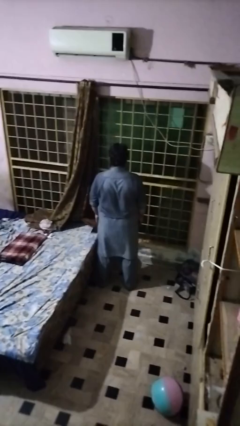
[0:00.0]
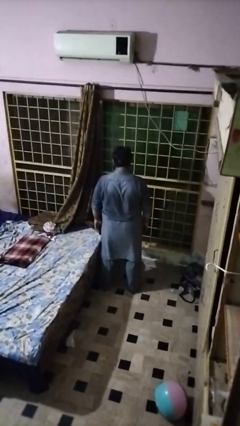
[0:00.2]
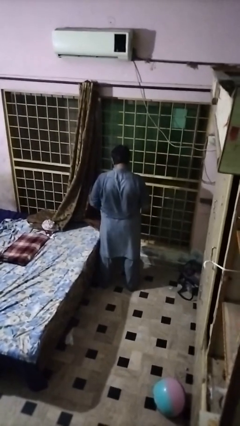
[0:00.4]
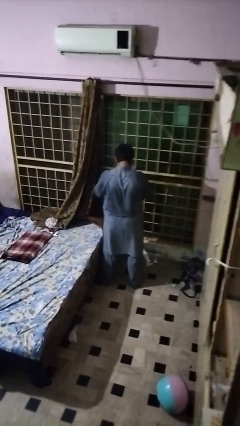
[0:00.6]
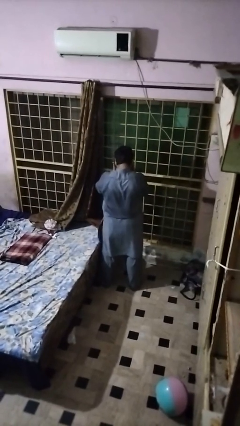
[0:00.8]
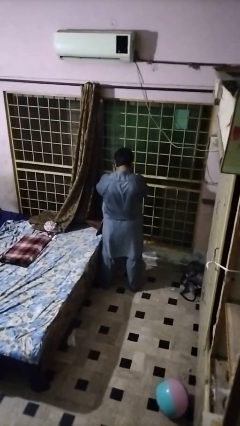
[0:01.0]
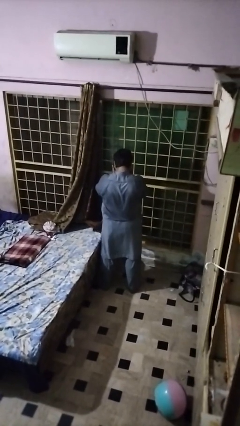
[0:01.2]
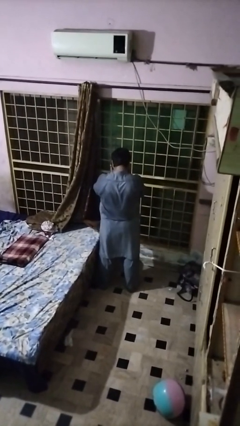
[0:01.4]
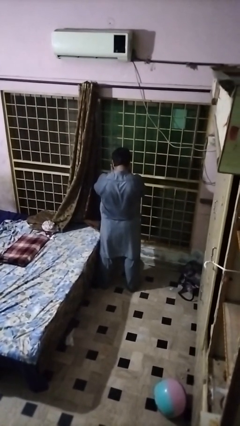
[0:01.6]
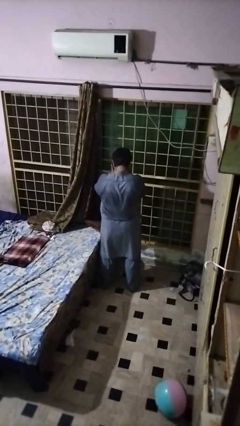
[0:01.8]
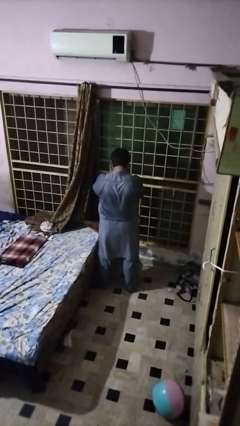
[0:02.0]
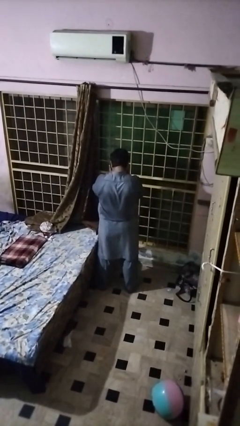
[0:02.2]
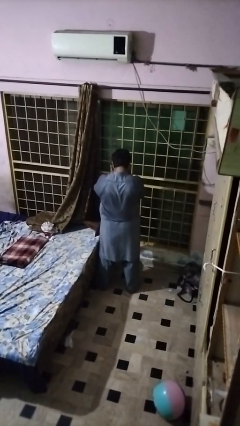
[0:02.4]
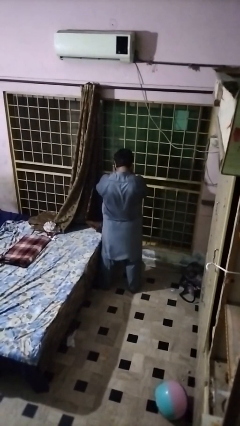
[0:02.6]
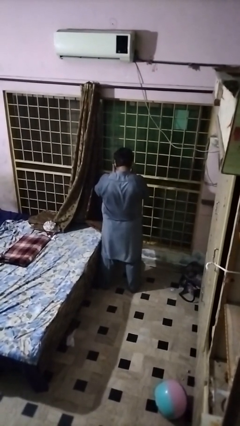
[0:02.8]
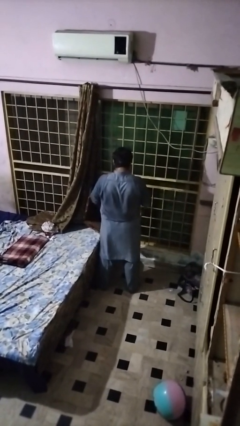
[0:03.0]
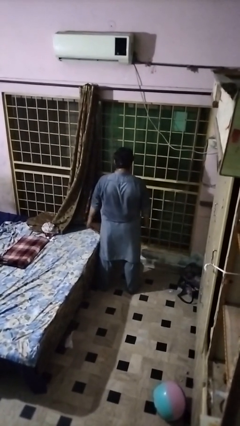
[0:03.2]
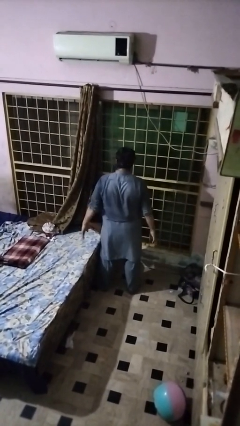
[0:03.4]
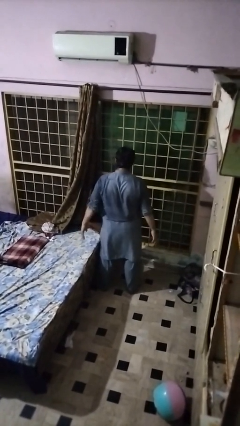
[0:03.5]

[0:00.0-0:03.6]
person covers face with hands

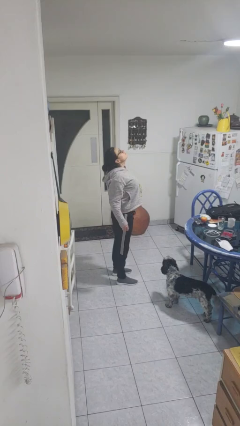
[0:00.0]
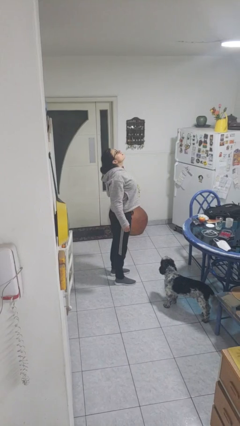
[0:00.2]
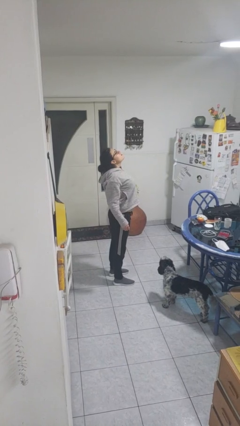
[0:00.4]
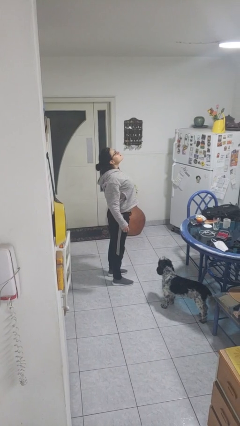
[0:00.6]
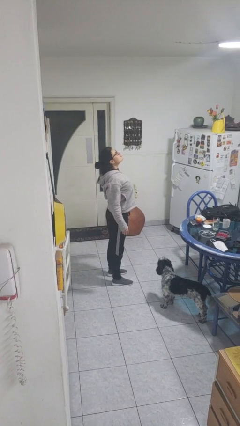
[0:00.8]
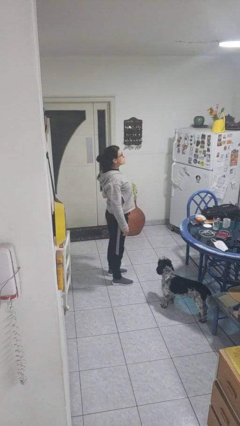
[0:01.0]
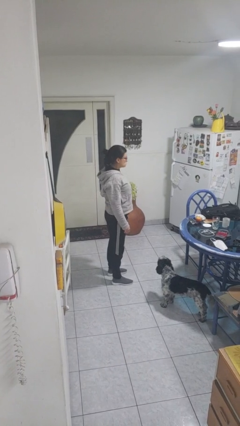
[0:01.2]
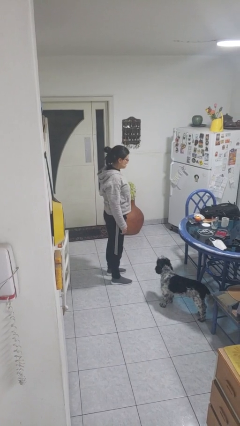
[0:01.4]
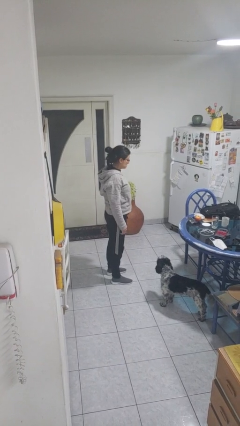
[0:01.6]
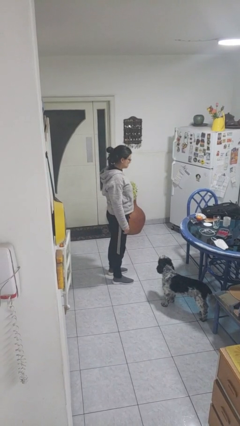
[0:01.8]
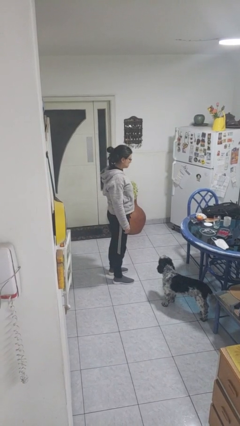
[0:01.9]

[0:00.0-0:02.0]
person stretches back

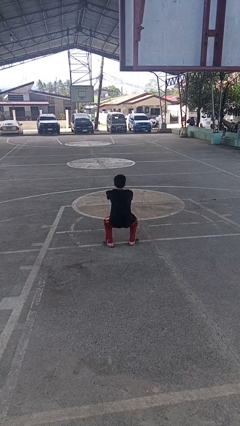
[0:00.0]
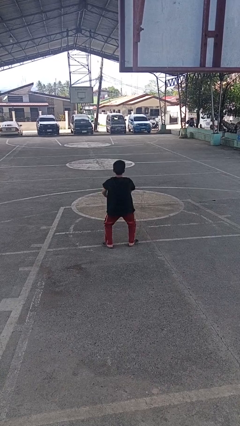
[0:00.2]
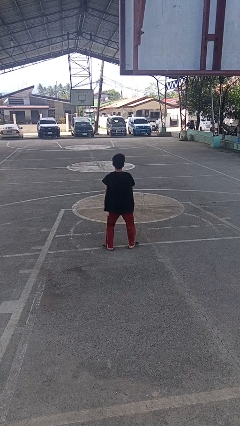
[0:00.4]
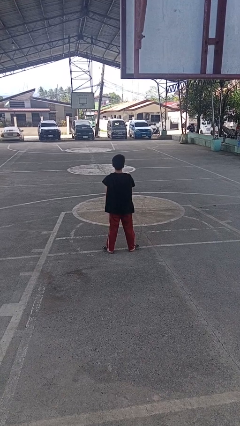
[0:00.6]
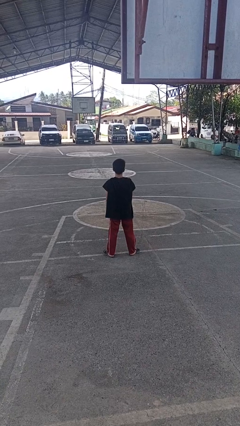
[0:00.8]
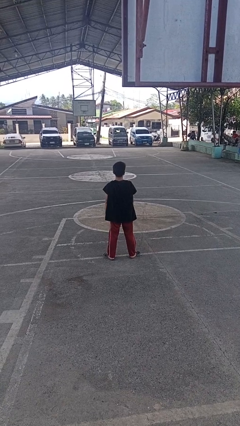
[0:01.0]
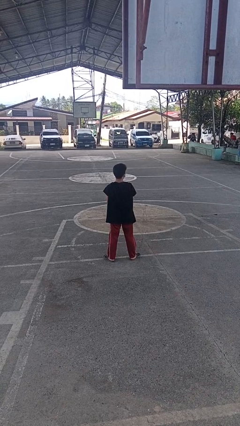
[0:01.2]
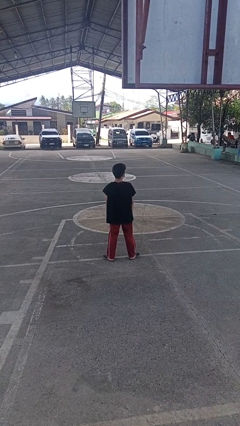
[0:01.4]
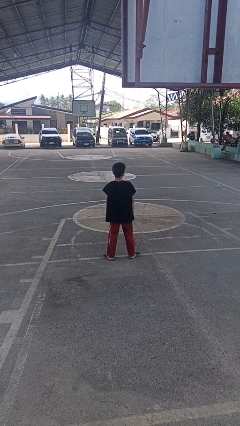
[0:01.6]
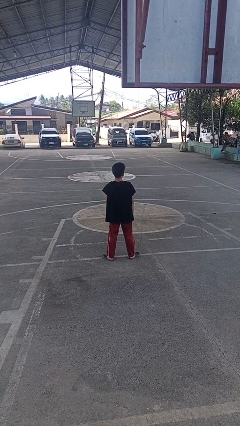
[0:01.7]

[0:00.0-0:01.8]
person stands up

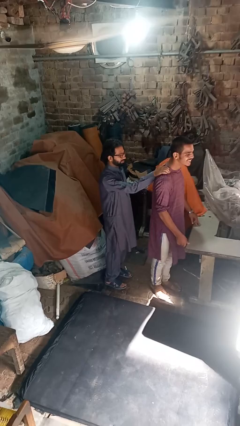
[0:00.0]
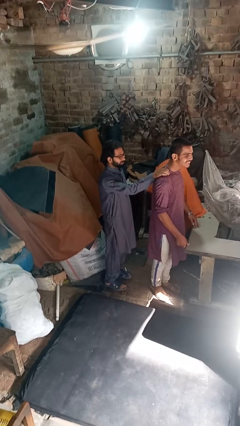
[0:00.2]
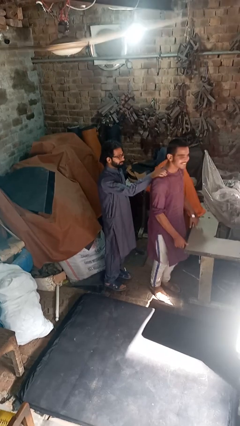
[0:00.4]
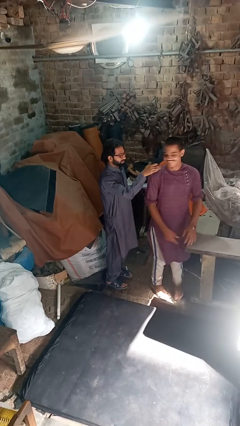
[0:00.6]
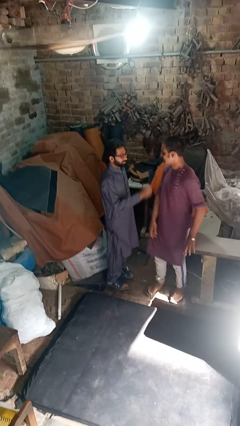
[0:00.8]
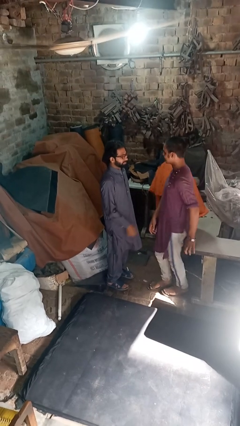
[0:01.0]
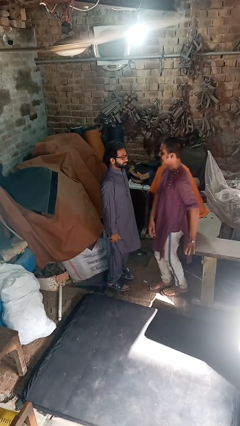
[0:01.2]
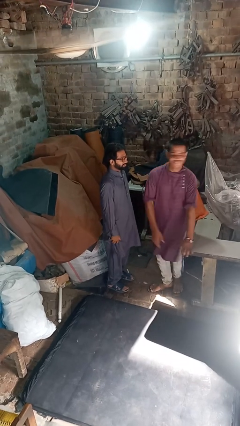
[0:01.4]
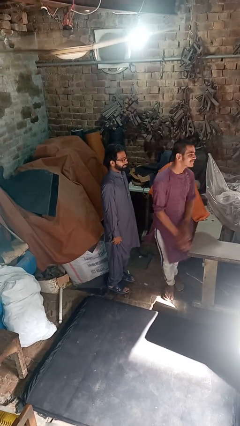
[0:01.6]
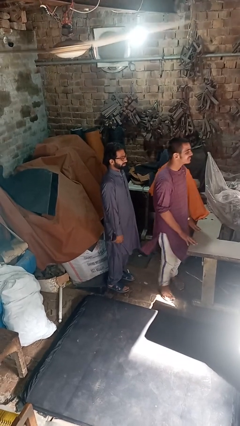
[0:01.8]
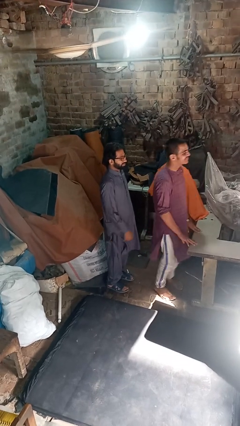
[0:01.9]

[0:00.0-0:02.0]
person spins person around

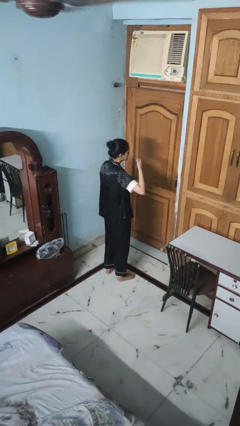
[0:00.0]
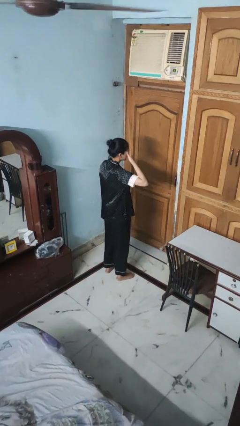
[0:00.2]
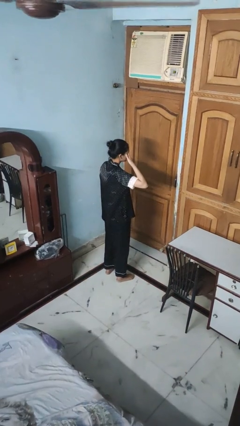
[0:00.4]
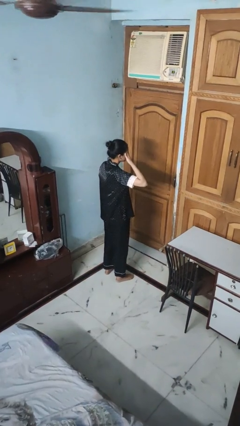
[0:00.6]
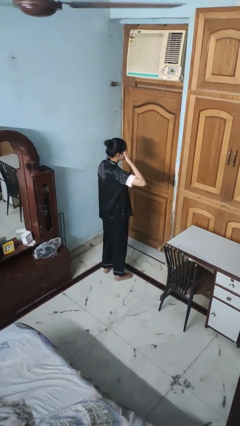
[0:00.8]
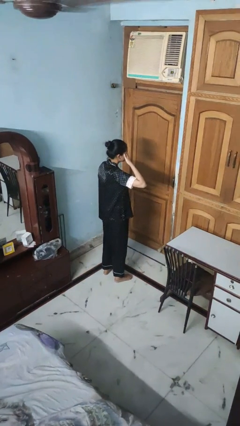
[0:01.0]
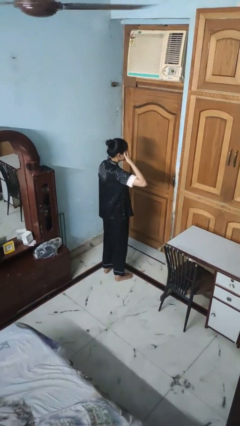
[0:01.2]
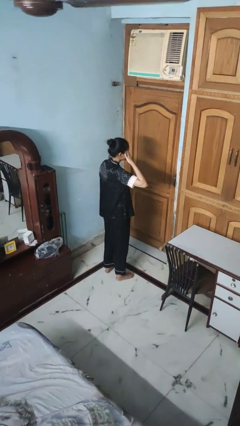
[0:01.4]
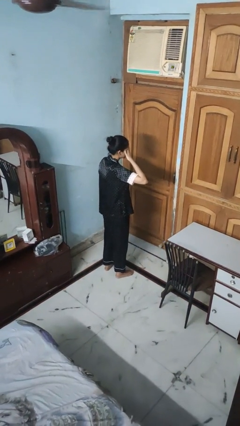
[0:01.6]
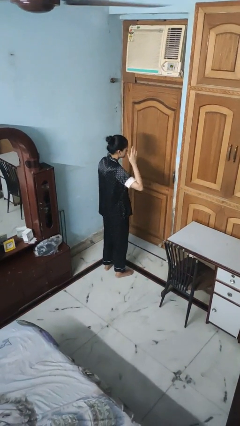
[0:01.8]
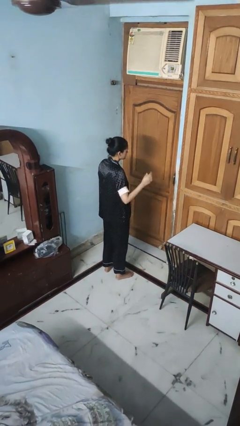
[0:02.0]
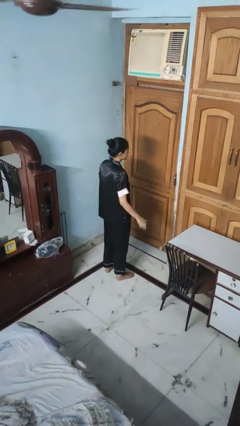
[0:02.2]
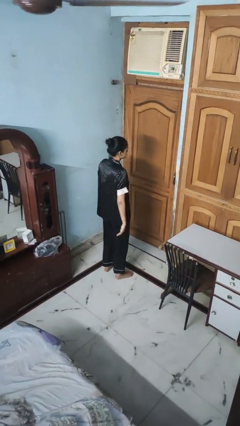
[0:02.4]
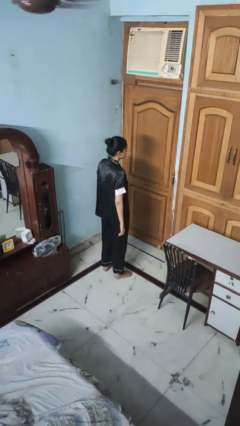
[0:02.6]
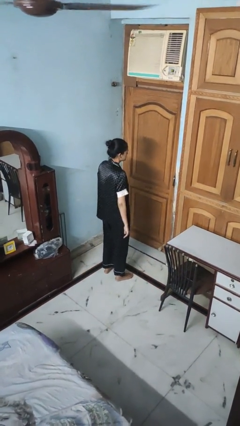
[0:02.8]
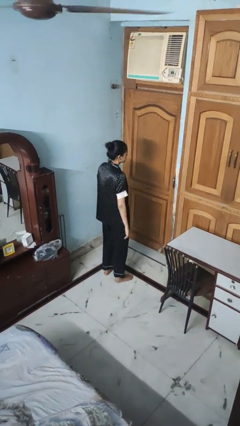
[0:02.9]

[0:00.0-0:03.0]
person rubs eyes

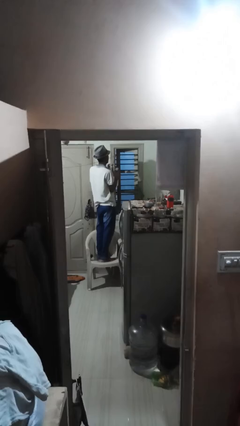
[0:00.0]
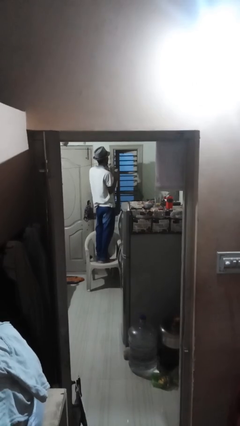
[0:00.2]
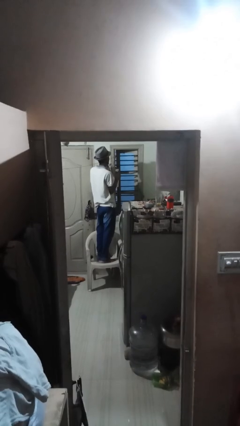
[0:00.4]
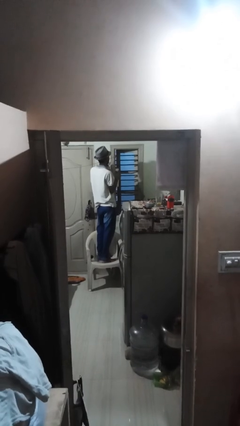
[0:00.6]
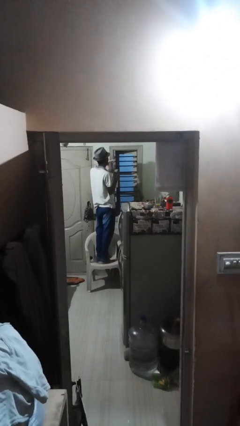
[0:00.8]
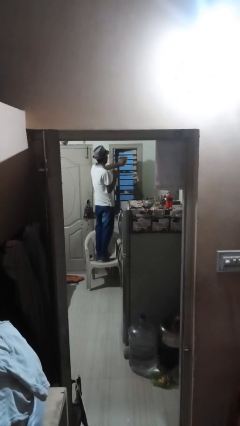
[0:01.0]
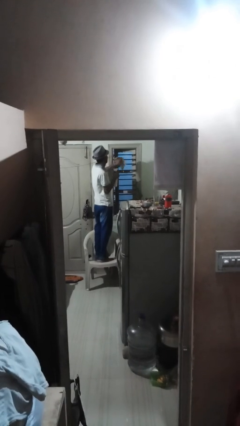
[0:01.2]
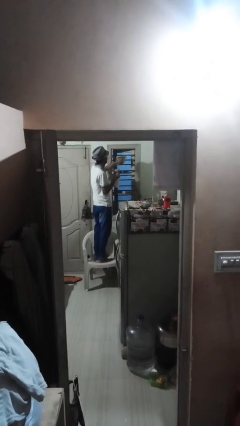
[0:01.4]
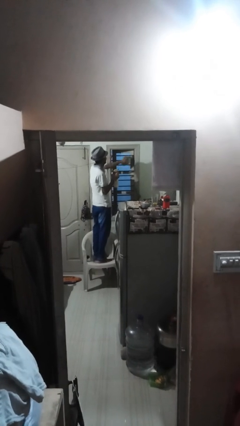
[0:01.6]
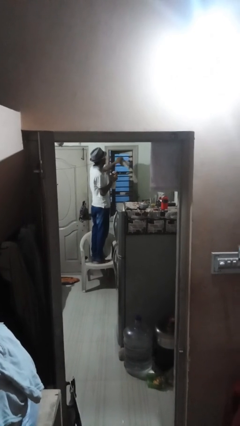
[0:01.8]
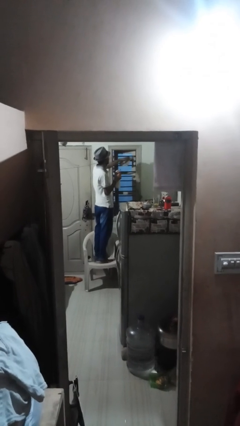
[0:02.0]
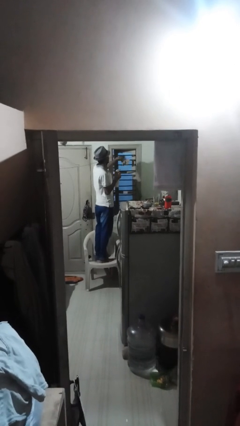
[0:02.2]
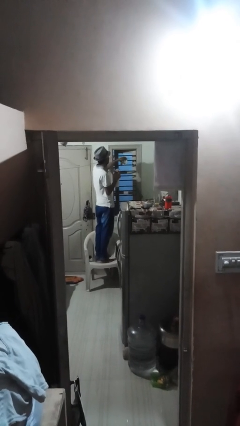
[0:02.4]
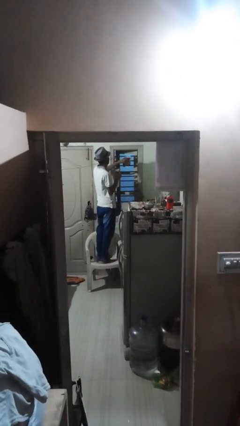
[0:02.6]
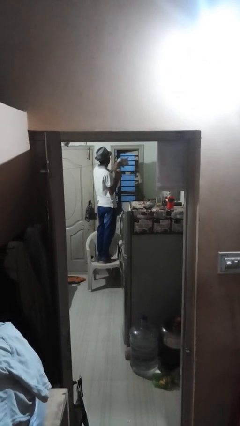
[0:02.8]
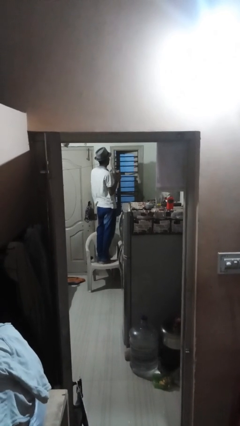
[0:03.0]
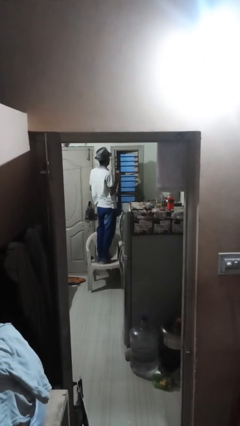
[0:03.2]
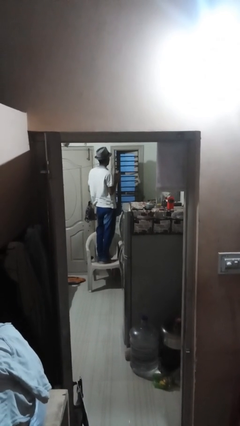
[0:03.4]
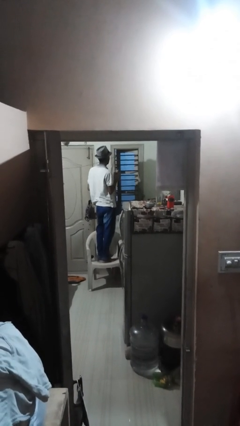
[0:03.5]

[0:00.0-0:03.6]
person washes window

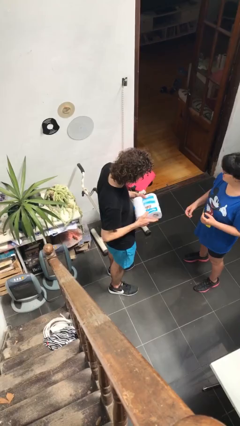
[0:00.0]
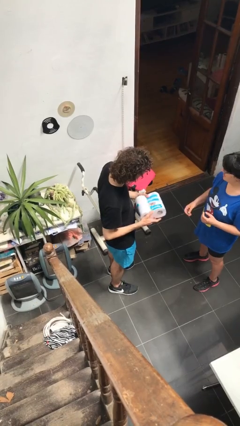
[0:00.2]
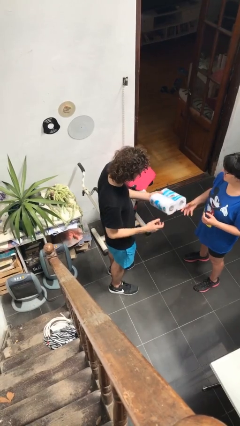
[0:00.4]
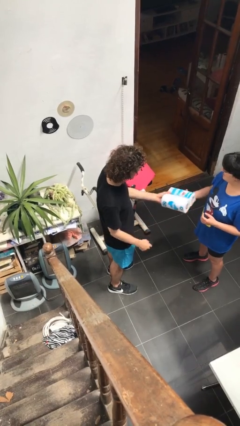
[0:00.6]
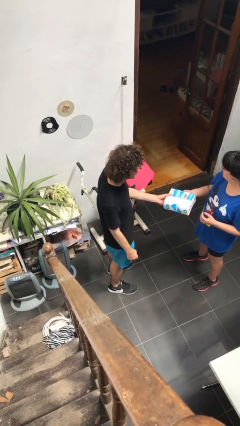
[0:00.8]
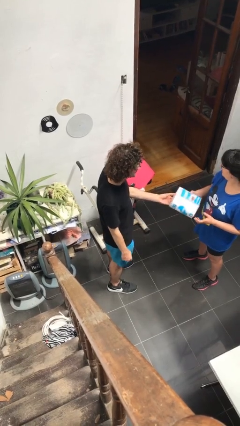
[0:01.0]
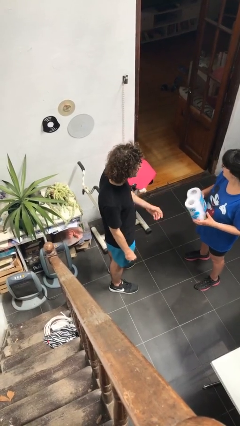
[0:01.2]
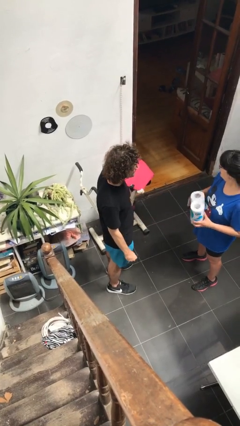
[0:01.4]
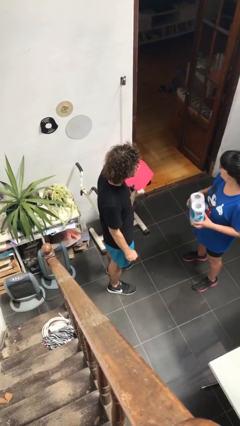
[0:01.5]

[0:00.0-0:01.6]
person transfers object to person
